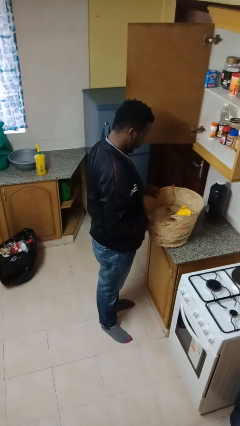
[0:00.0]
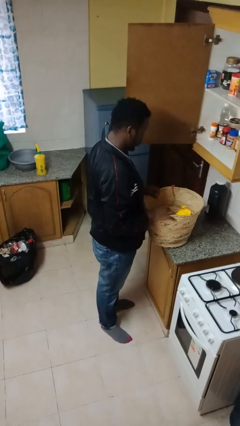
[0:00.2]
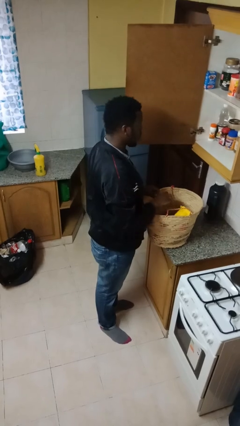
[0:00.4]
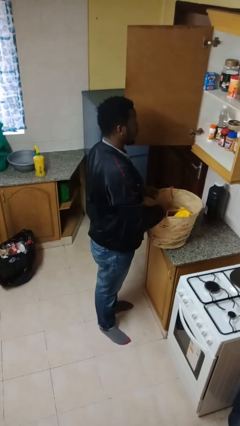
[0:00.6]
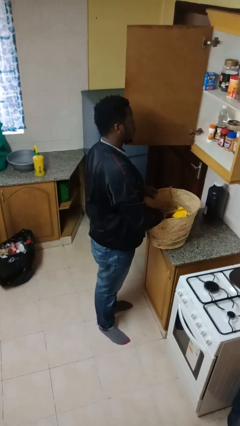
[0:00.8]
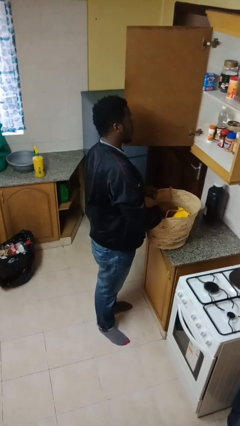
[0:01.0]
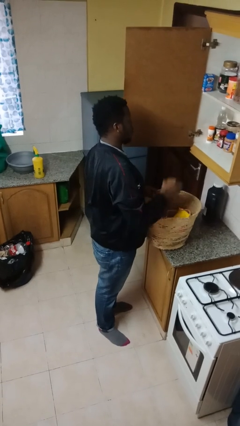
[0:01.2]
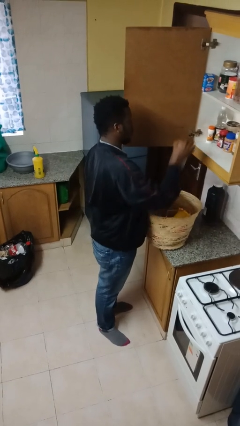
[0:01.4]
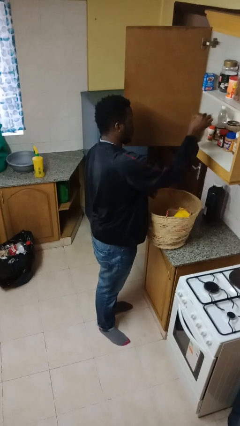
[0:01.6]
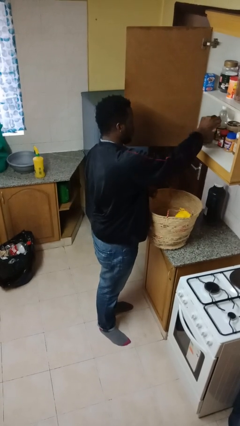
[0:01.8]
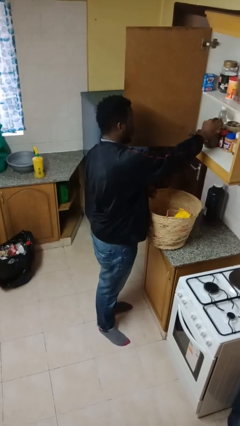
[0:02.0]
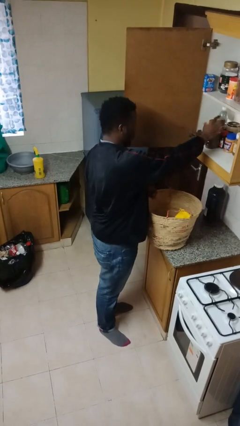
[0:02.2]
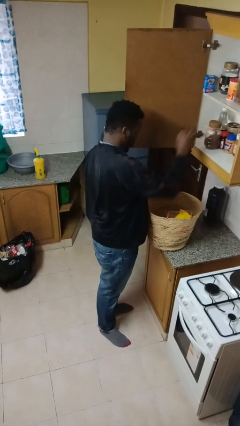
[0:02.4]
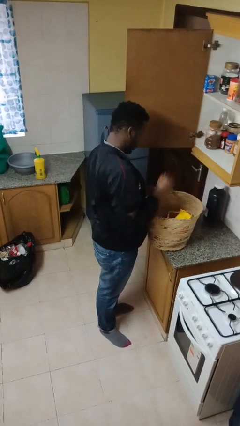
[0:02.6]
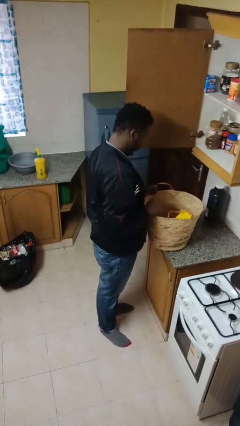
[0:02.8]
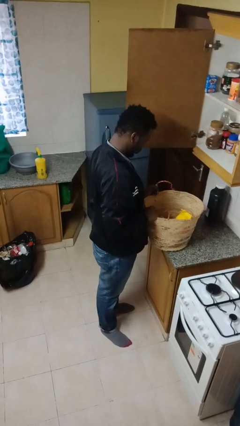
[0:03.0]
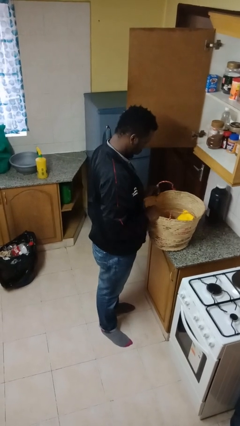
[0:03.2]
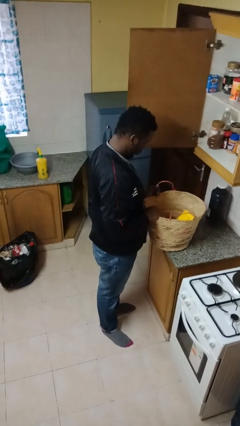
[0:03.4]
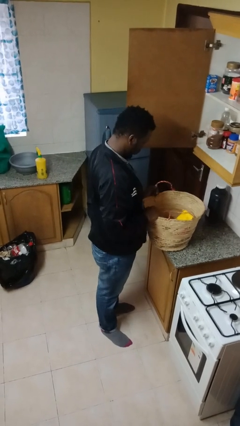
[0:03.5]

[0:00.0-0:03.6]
person loads groceries into cabinet

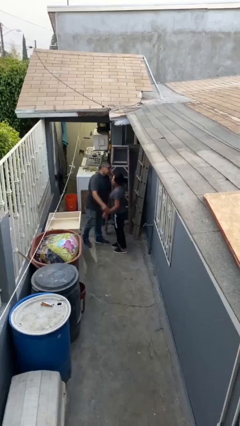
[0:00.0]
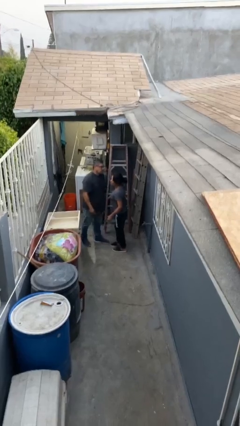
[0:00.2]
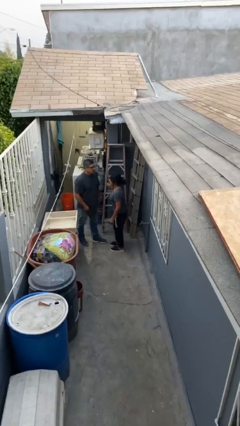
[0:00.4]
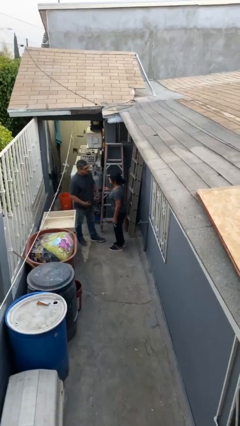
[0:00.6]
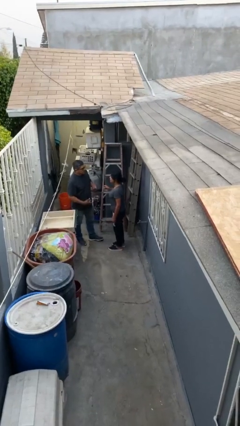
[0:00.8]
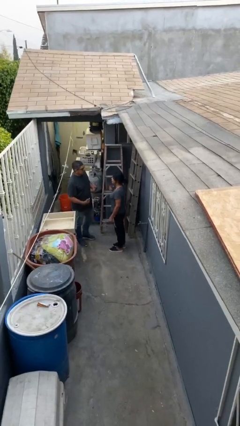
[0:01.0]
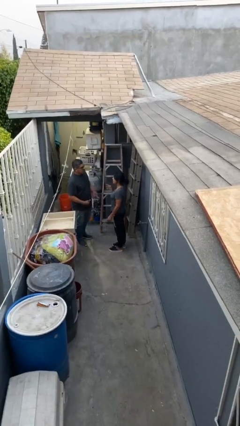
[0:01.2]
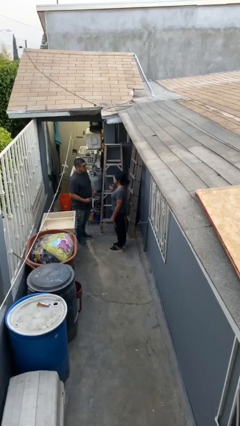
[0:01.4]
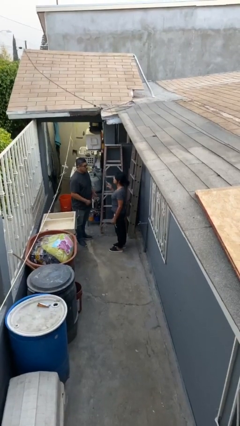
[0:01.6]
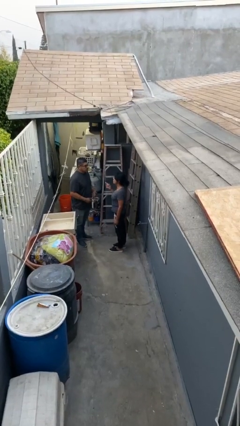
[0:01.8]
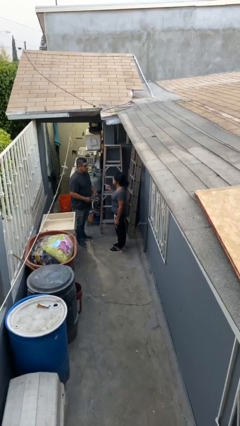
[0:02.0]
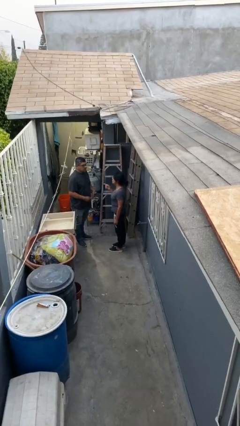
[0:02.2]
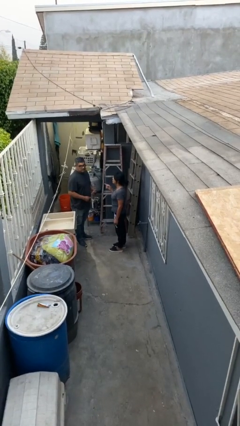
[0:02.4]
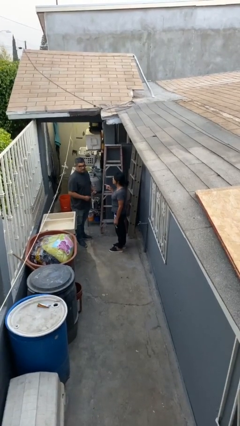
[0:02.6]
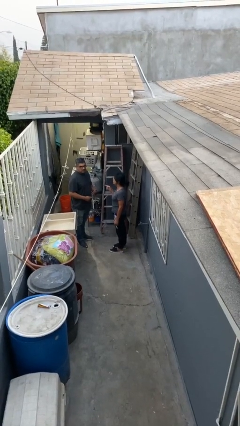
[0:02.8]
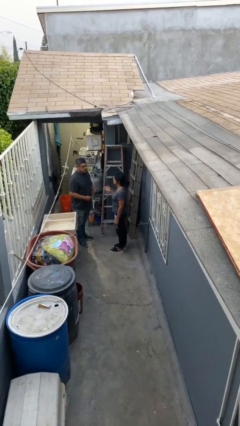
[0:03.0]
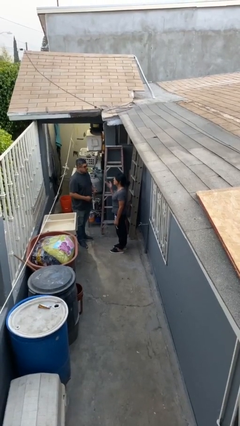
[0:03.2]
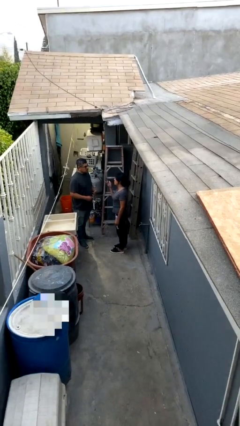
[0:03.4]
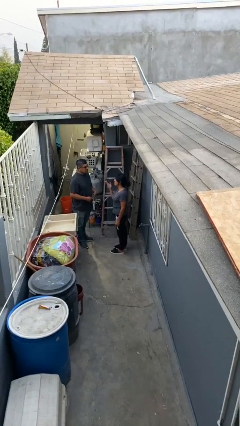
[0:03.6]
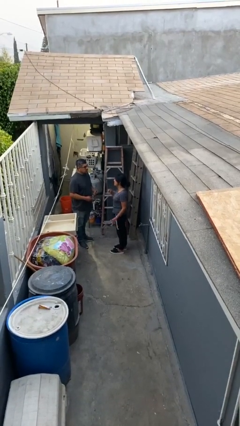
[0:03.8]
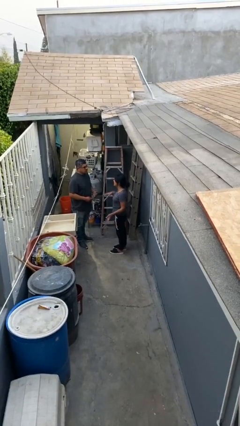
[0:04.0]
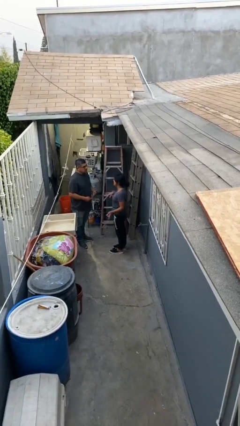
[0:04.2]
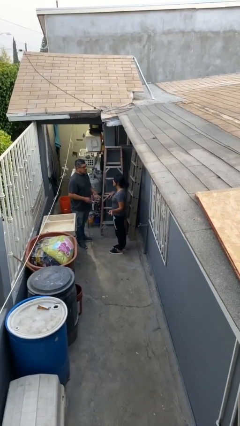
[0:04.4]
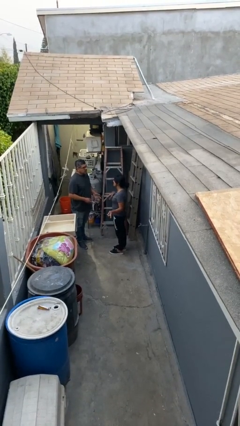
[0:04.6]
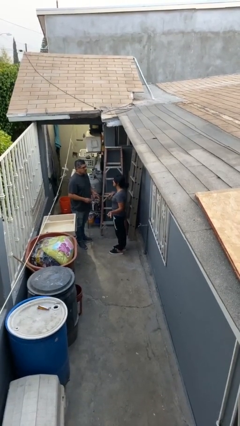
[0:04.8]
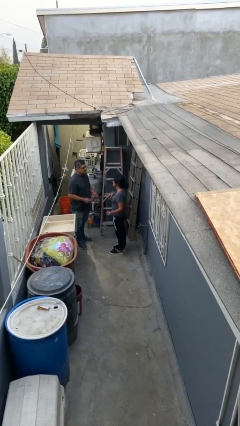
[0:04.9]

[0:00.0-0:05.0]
person talks to person

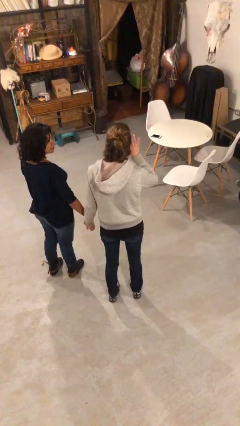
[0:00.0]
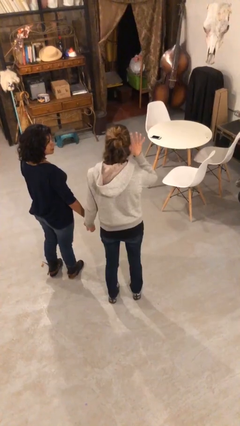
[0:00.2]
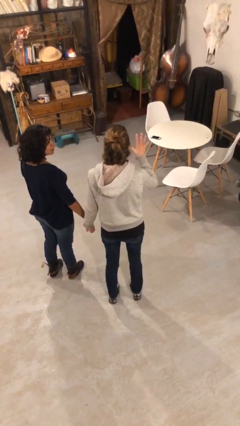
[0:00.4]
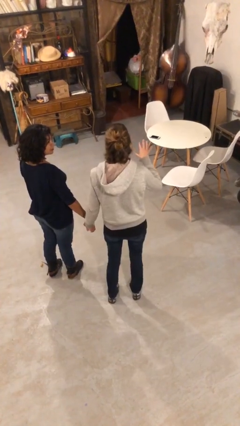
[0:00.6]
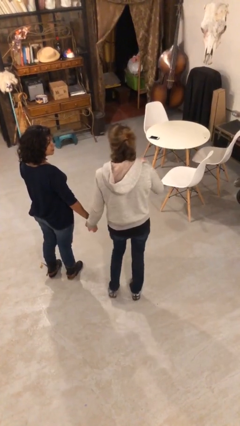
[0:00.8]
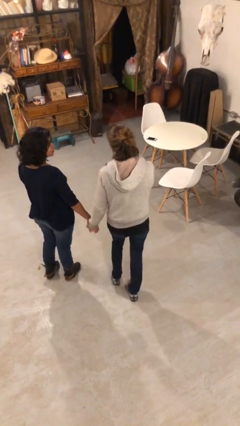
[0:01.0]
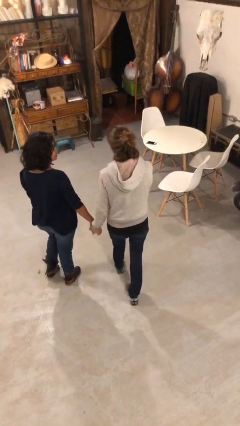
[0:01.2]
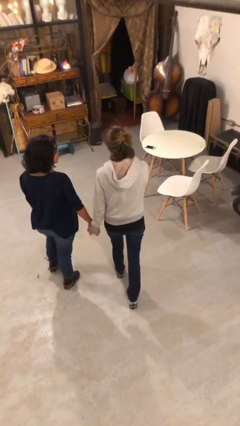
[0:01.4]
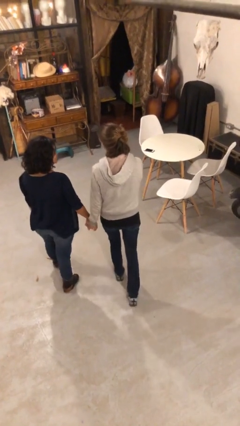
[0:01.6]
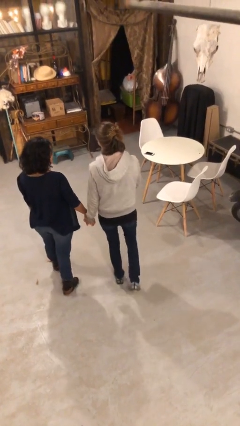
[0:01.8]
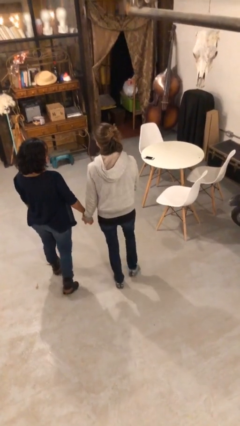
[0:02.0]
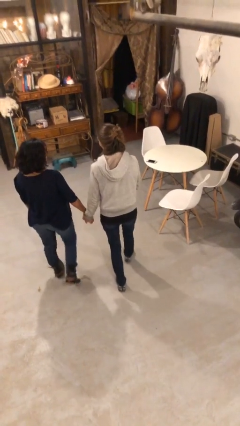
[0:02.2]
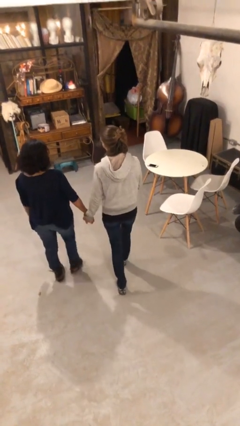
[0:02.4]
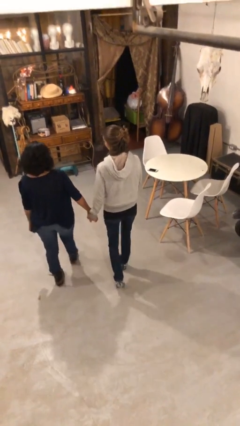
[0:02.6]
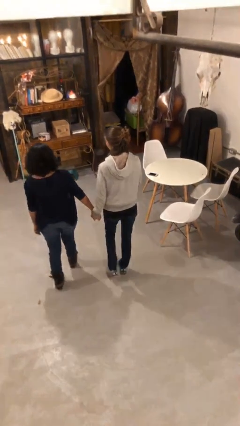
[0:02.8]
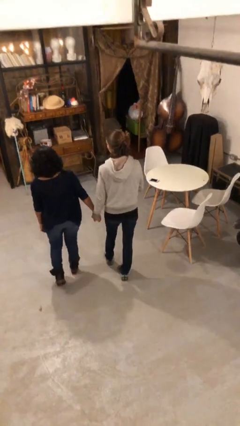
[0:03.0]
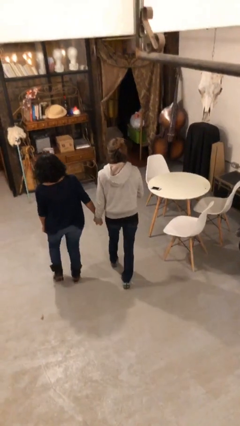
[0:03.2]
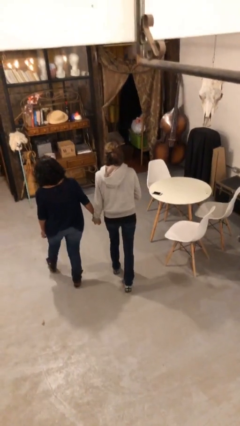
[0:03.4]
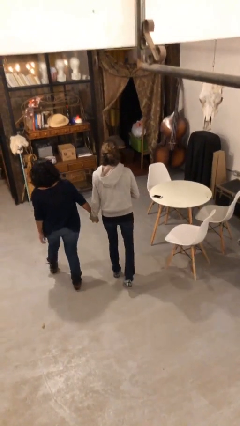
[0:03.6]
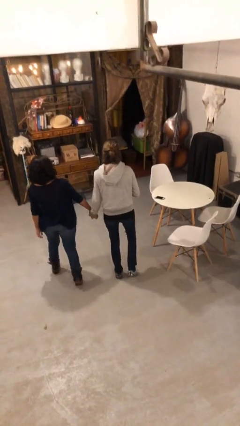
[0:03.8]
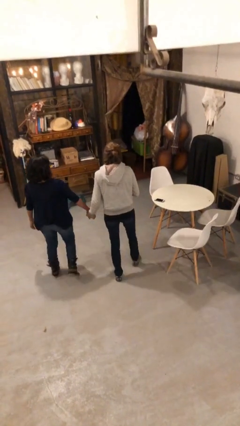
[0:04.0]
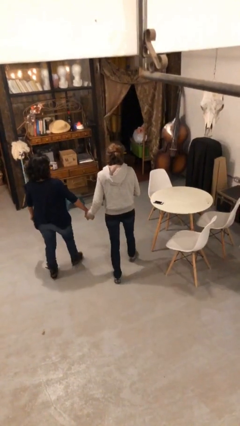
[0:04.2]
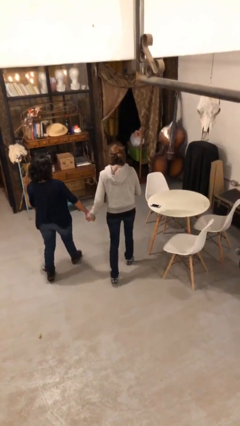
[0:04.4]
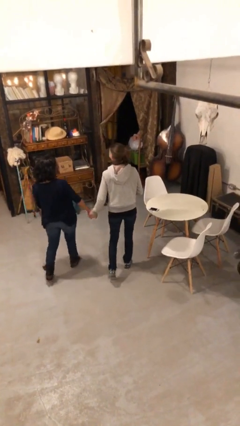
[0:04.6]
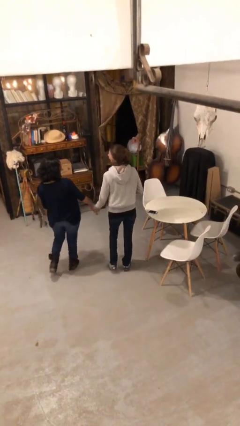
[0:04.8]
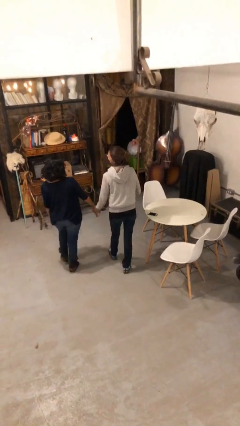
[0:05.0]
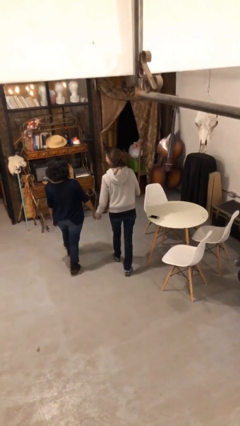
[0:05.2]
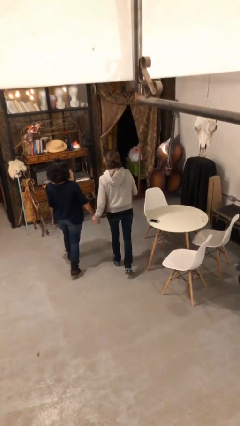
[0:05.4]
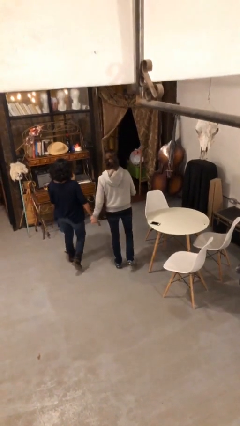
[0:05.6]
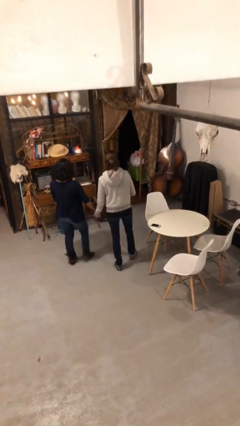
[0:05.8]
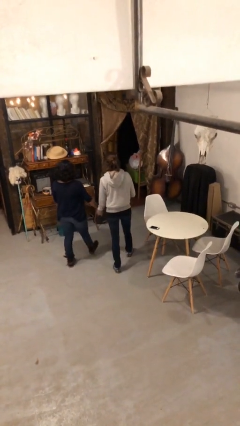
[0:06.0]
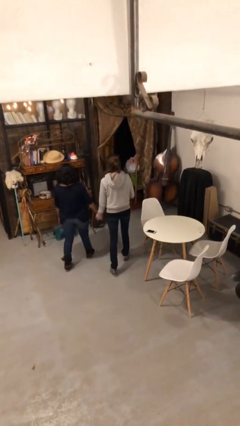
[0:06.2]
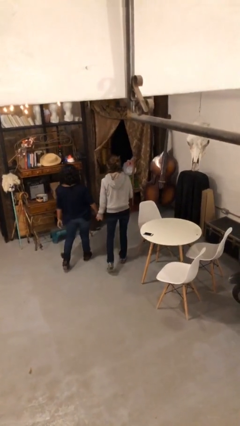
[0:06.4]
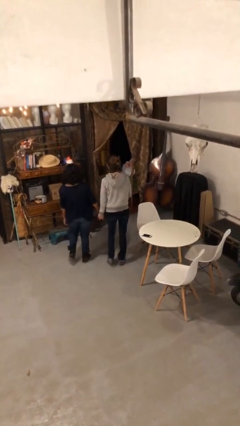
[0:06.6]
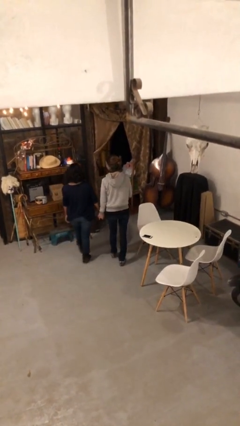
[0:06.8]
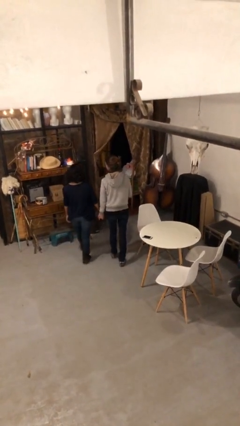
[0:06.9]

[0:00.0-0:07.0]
person holds hand

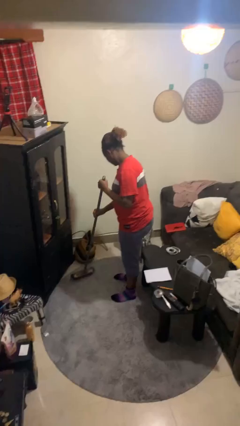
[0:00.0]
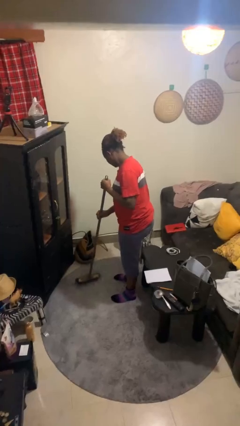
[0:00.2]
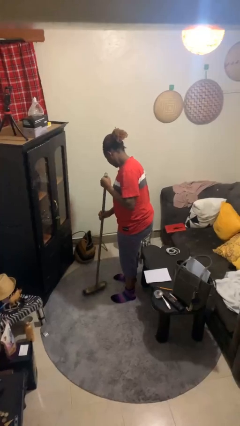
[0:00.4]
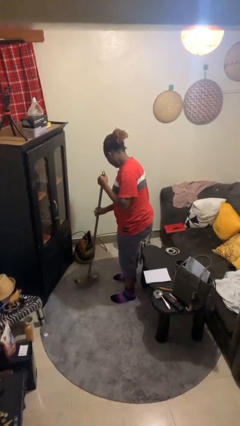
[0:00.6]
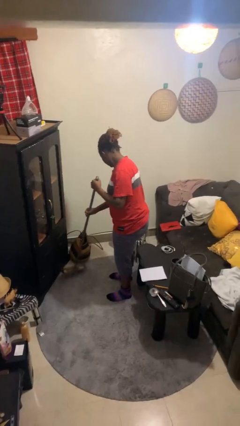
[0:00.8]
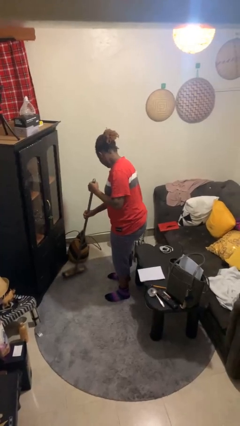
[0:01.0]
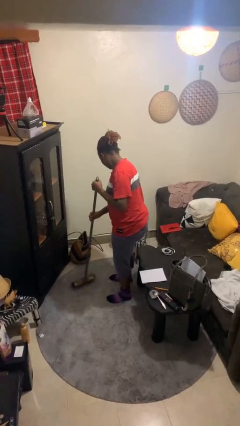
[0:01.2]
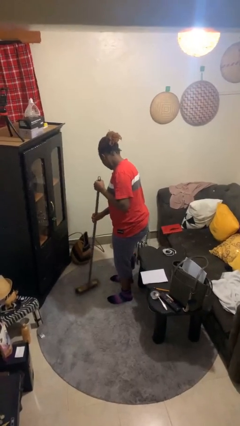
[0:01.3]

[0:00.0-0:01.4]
person sweeps floor

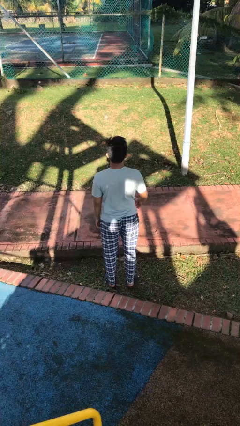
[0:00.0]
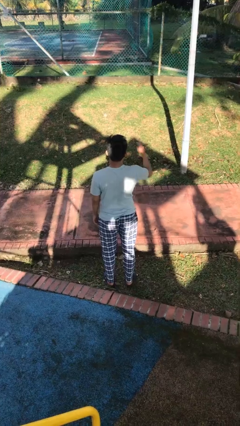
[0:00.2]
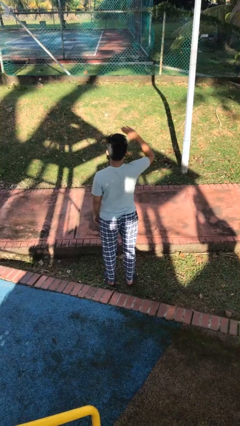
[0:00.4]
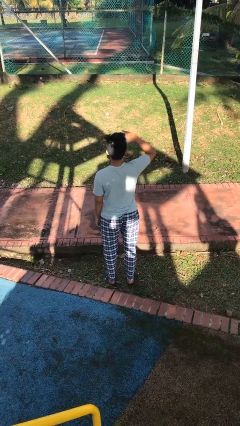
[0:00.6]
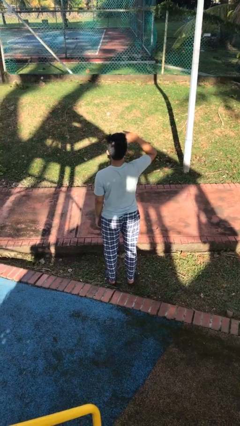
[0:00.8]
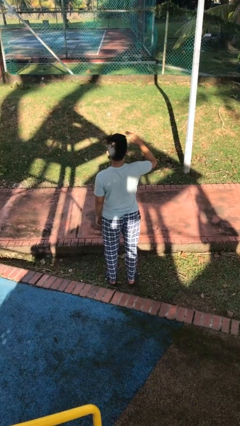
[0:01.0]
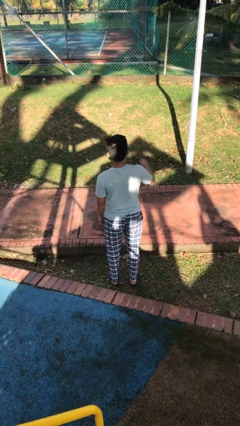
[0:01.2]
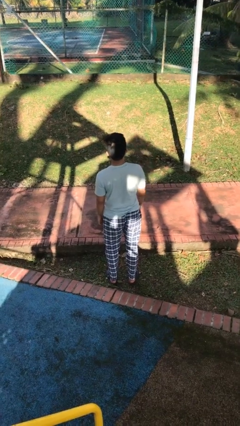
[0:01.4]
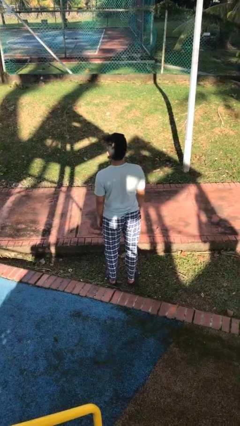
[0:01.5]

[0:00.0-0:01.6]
person salutes
